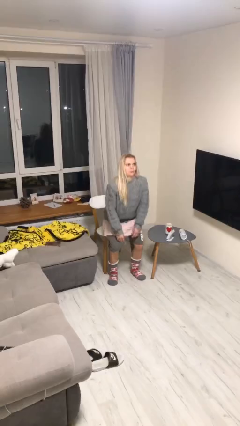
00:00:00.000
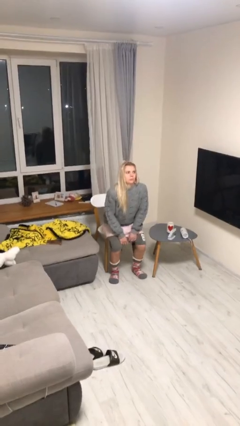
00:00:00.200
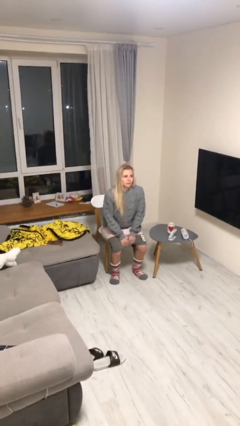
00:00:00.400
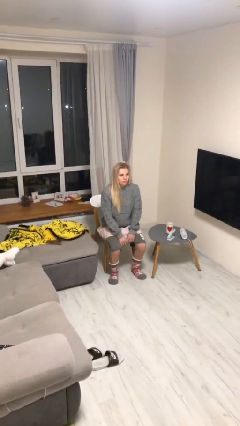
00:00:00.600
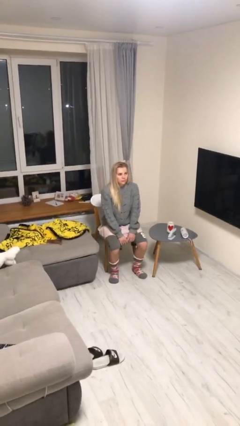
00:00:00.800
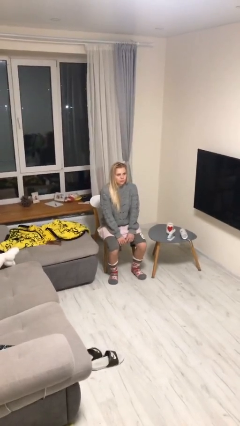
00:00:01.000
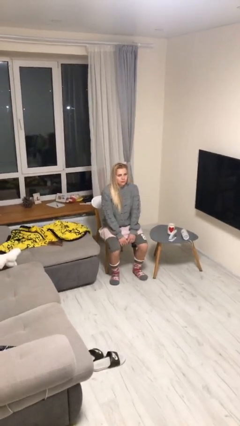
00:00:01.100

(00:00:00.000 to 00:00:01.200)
person sits down

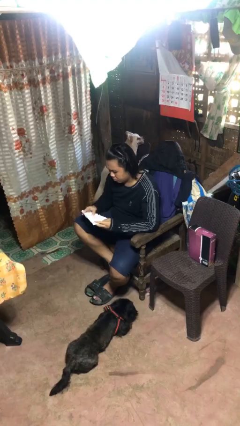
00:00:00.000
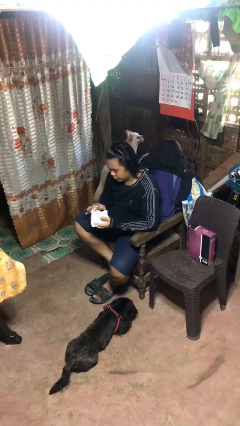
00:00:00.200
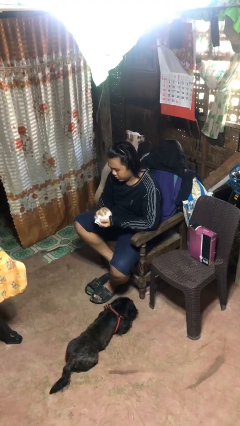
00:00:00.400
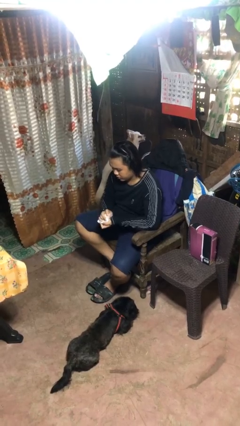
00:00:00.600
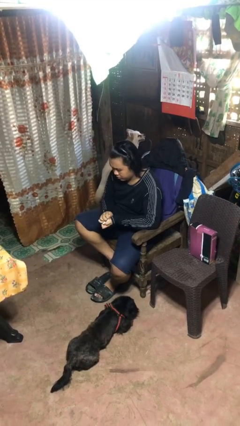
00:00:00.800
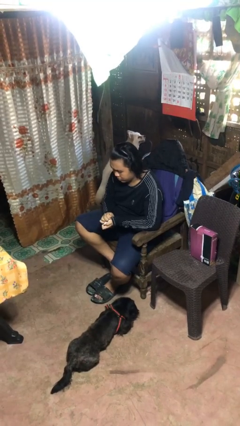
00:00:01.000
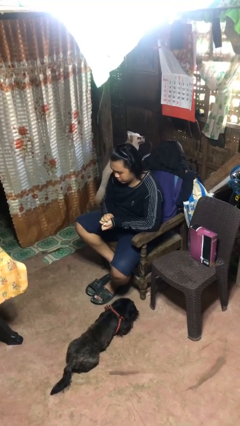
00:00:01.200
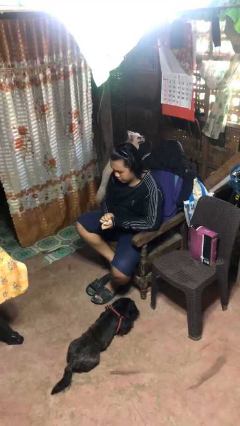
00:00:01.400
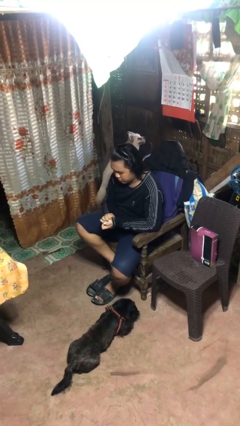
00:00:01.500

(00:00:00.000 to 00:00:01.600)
person crumples paper

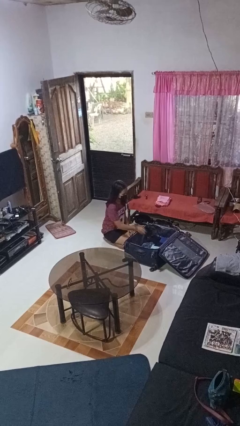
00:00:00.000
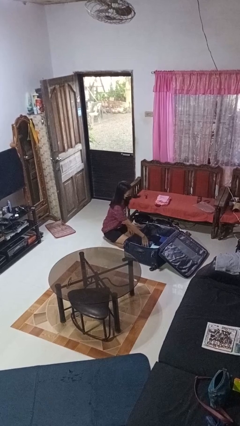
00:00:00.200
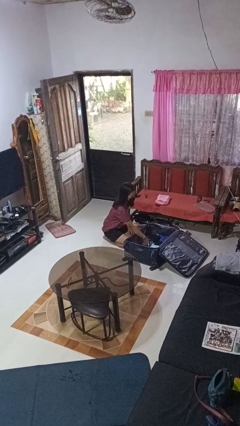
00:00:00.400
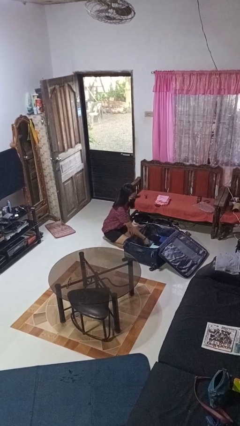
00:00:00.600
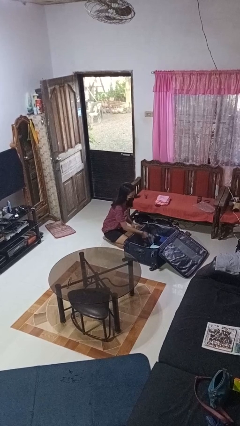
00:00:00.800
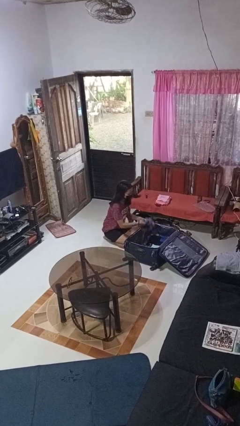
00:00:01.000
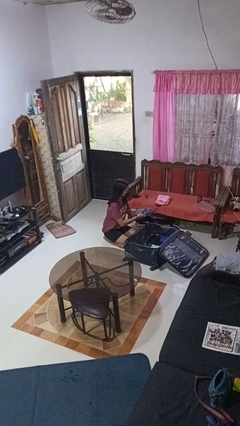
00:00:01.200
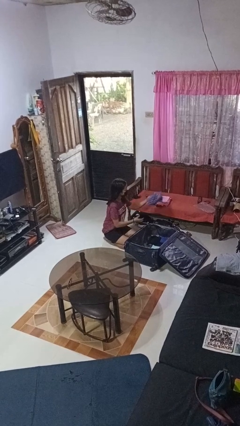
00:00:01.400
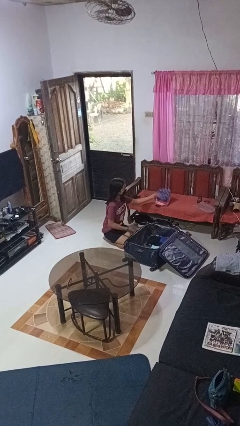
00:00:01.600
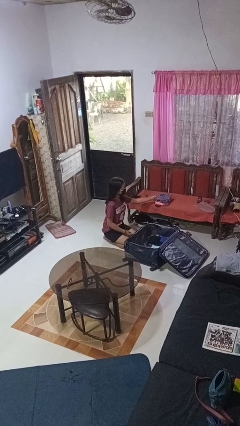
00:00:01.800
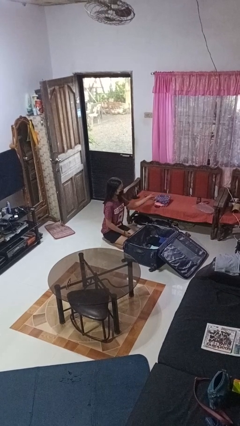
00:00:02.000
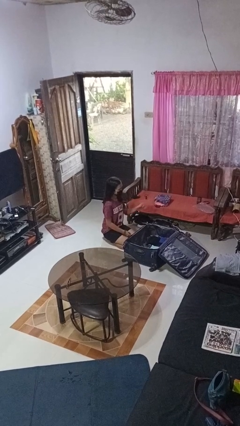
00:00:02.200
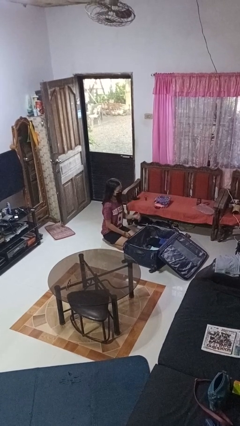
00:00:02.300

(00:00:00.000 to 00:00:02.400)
person unloads clothes from suitcase

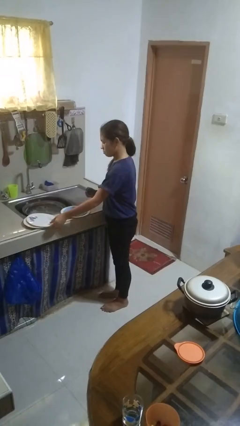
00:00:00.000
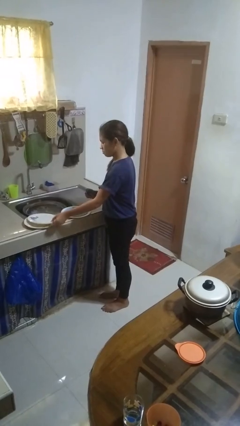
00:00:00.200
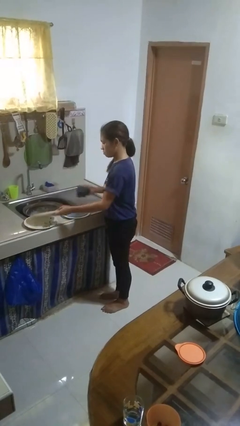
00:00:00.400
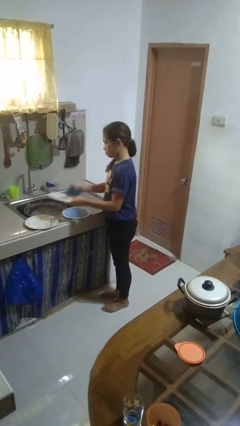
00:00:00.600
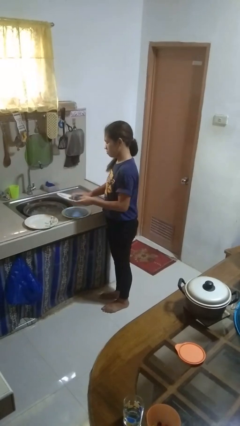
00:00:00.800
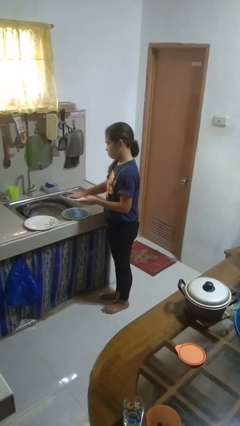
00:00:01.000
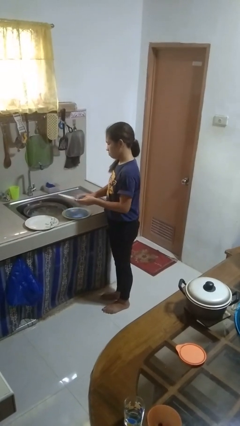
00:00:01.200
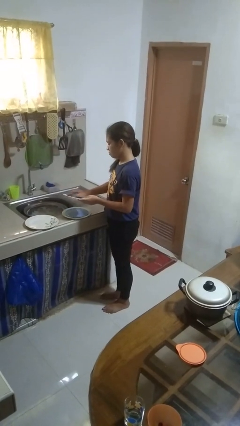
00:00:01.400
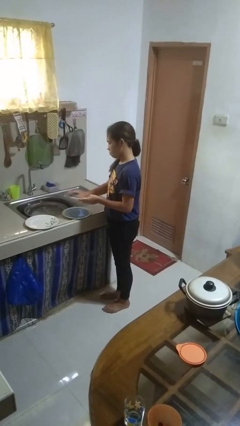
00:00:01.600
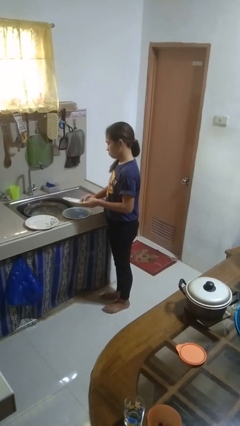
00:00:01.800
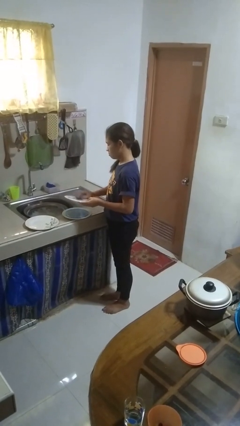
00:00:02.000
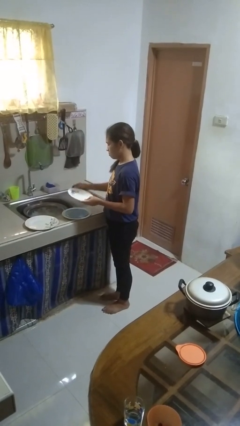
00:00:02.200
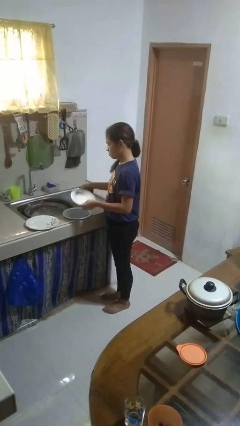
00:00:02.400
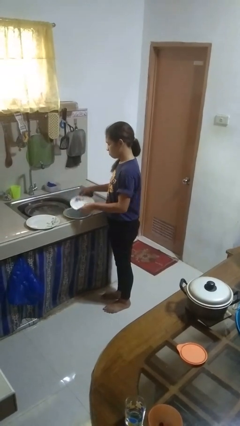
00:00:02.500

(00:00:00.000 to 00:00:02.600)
person dries dish

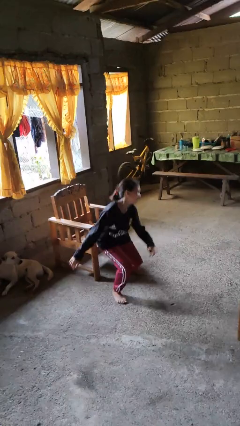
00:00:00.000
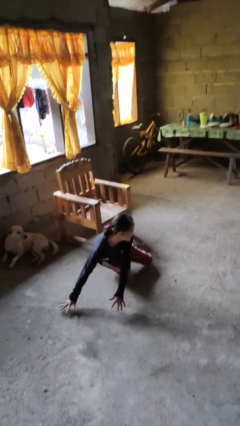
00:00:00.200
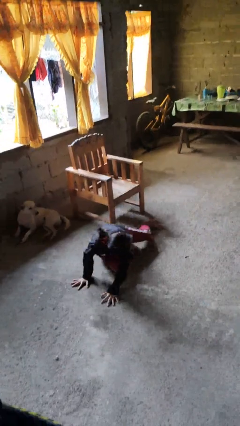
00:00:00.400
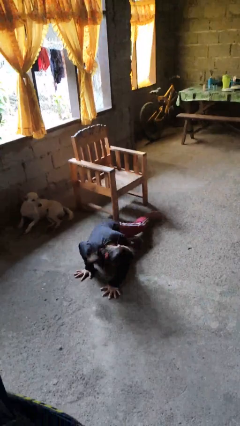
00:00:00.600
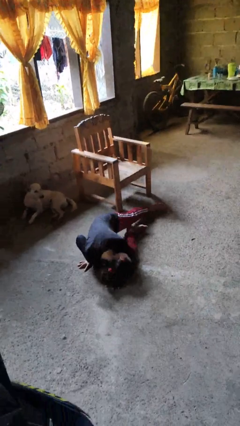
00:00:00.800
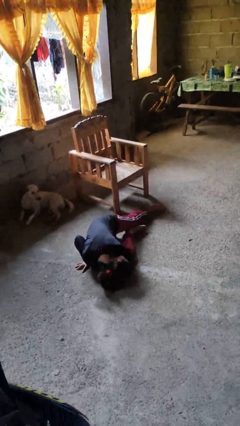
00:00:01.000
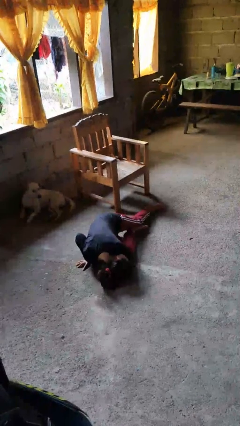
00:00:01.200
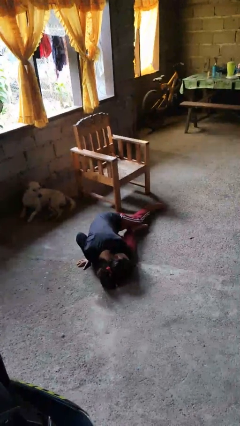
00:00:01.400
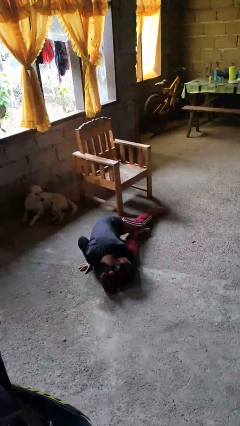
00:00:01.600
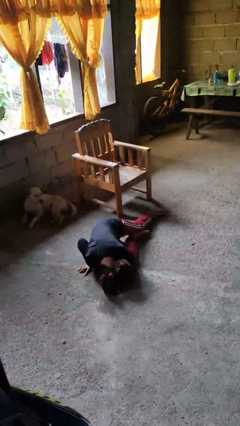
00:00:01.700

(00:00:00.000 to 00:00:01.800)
person falls from chair

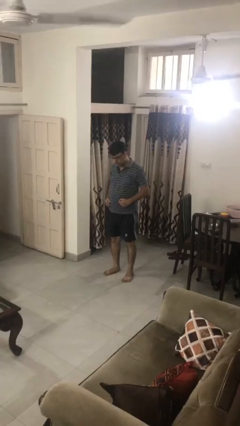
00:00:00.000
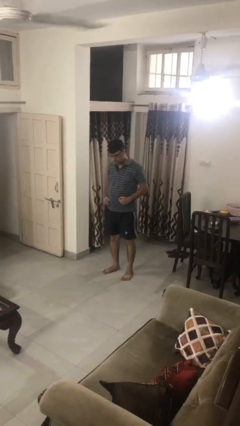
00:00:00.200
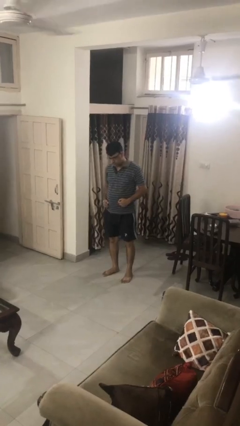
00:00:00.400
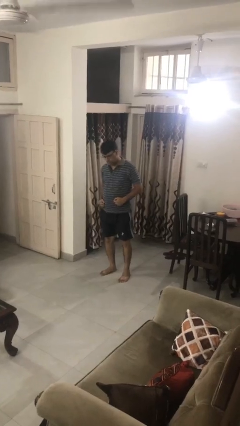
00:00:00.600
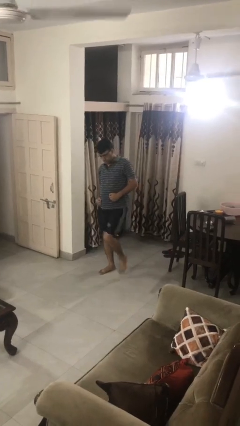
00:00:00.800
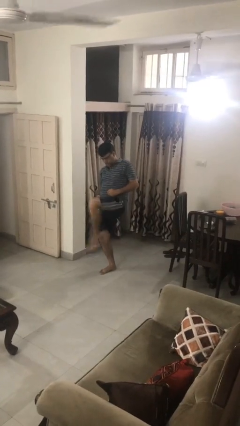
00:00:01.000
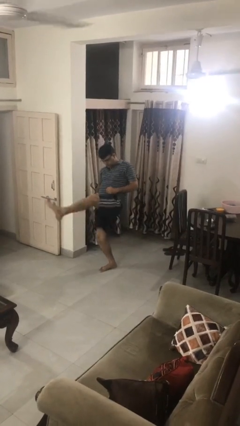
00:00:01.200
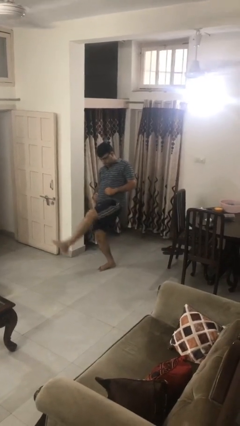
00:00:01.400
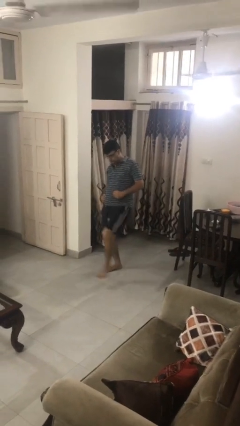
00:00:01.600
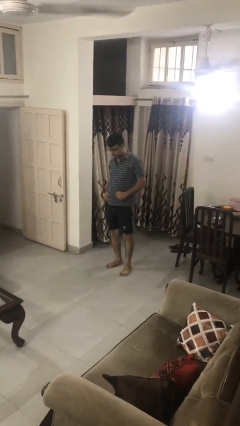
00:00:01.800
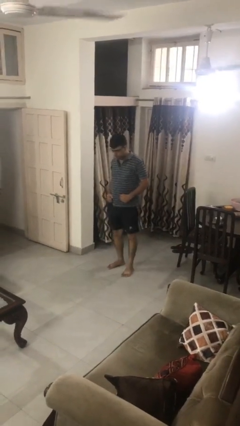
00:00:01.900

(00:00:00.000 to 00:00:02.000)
person karate kicks

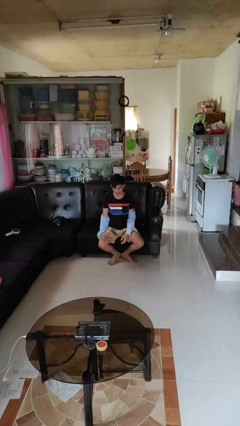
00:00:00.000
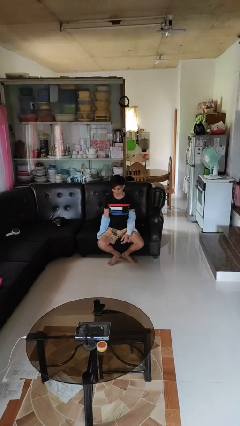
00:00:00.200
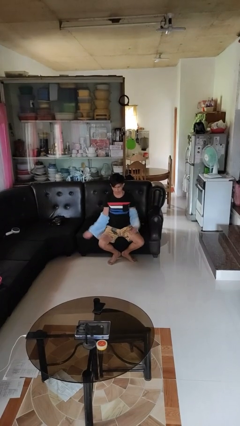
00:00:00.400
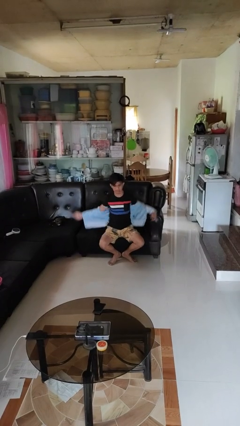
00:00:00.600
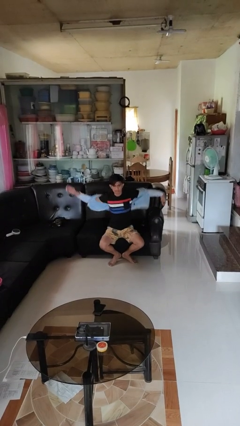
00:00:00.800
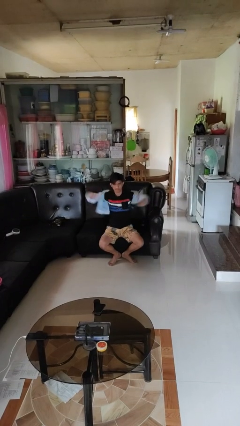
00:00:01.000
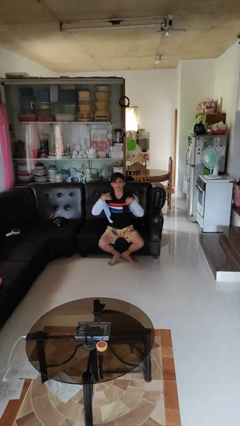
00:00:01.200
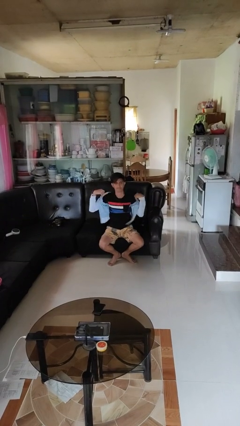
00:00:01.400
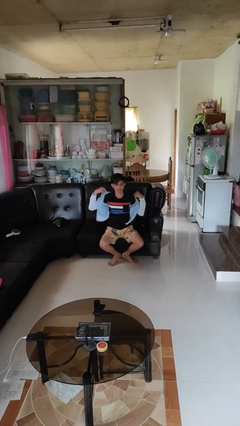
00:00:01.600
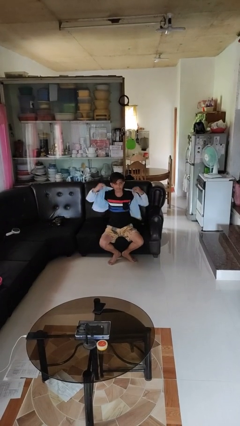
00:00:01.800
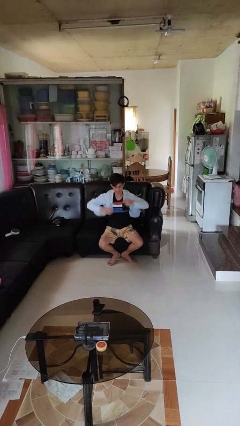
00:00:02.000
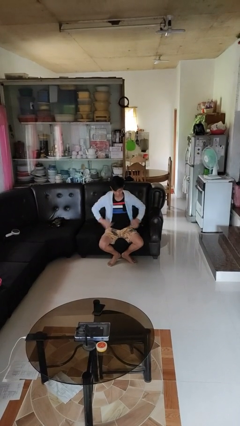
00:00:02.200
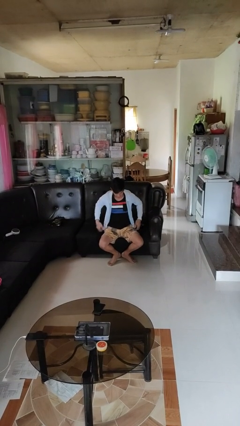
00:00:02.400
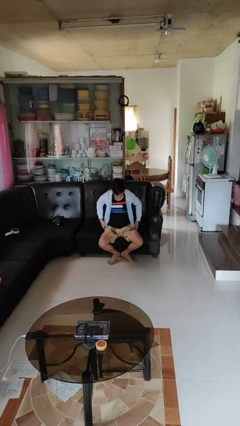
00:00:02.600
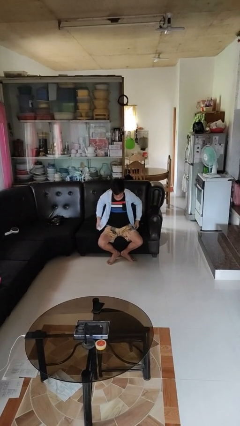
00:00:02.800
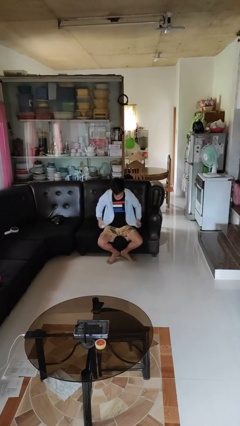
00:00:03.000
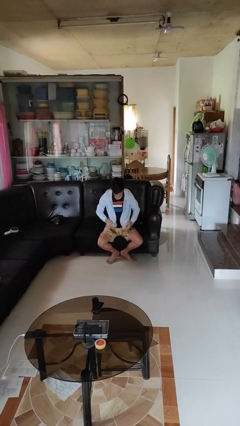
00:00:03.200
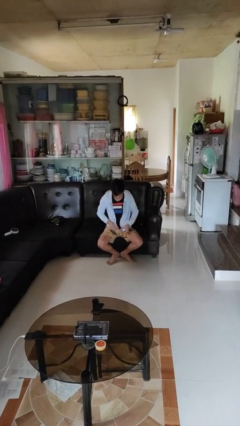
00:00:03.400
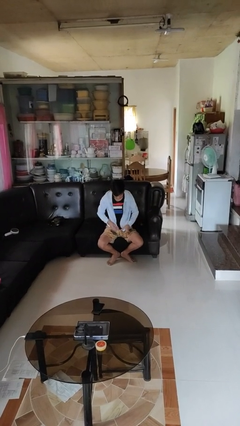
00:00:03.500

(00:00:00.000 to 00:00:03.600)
person puts on jacket

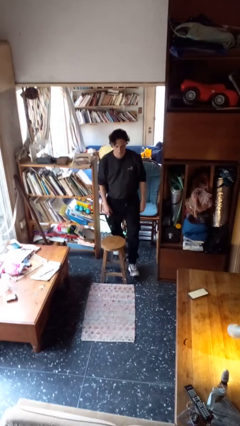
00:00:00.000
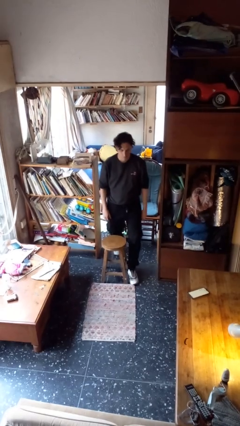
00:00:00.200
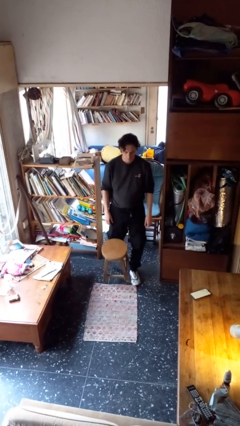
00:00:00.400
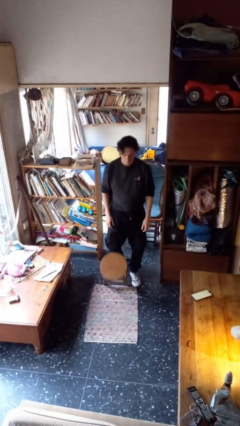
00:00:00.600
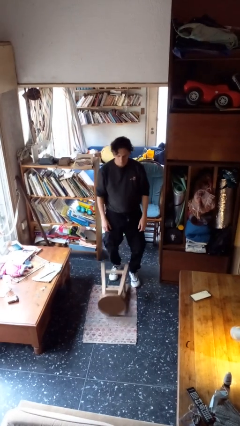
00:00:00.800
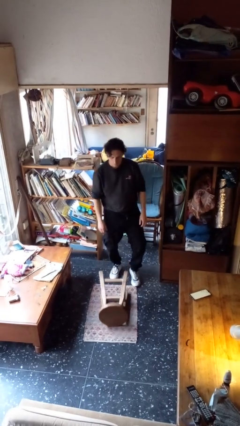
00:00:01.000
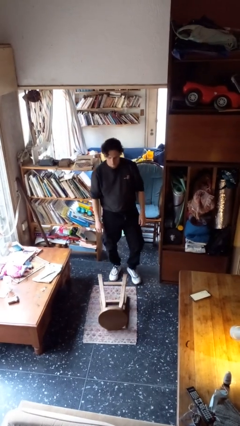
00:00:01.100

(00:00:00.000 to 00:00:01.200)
person knocks over furniture
